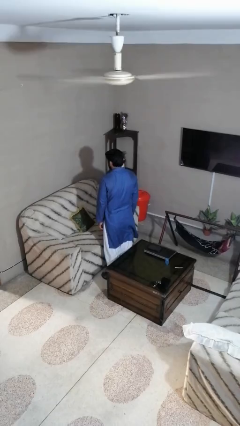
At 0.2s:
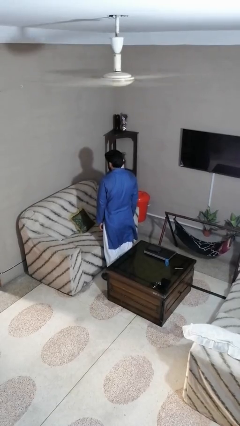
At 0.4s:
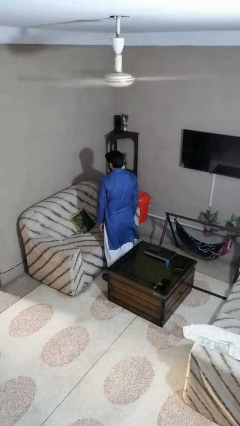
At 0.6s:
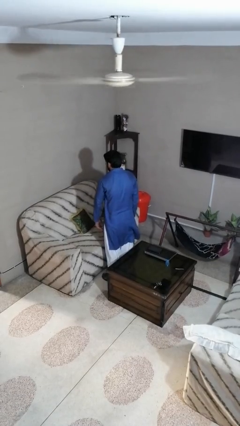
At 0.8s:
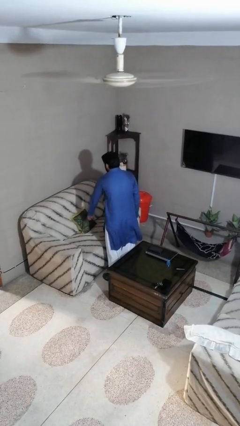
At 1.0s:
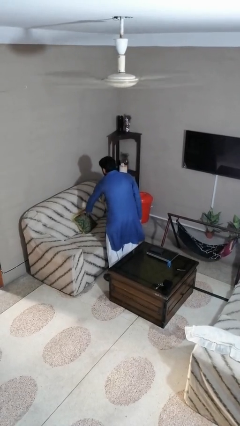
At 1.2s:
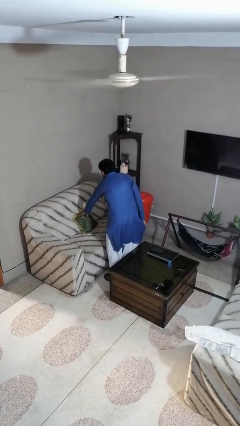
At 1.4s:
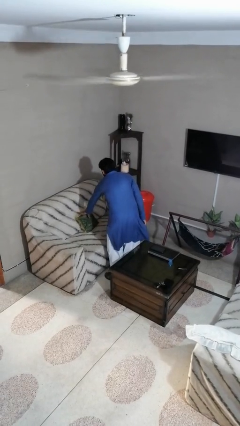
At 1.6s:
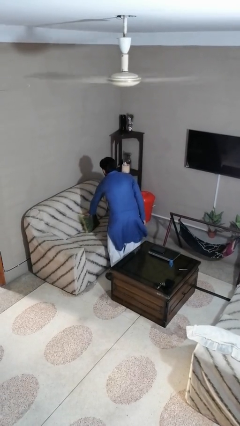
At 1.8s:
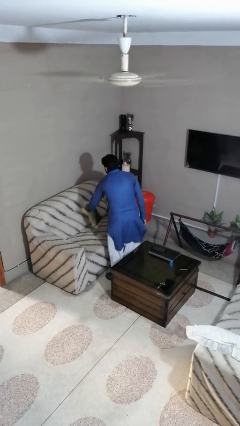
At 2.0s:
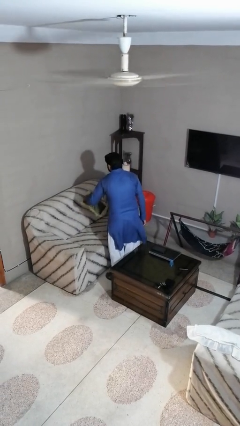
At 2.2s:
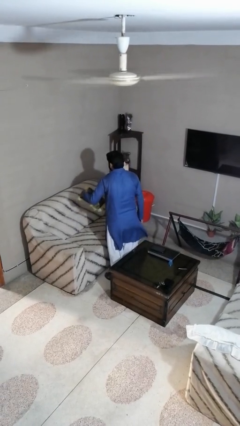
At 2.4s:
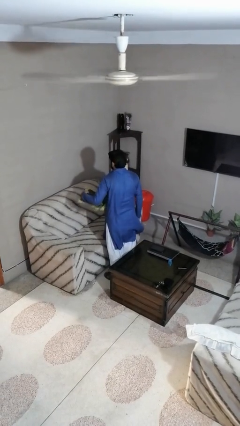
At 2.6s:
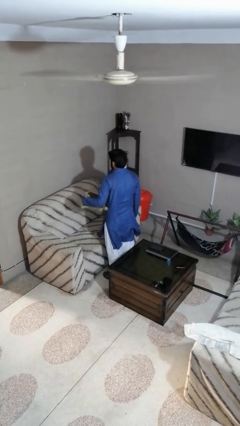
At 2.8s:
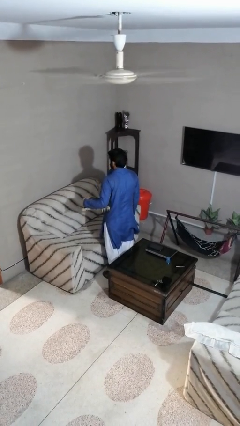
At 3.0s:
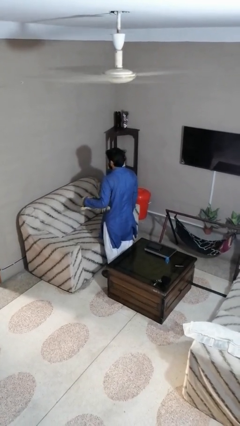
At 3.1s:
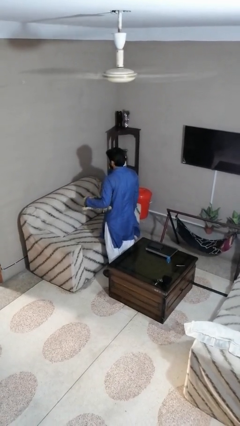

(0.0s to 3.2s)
person picks up object from couch

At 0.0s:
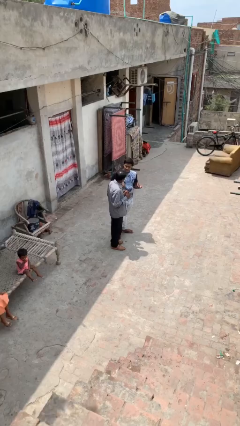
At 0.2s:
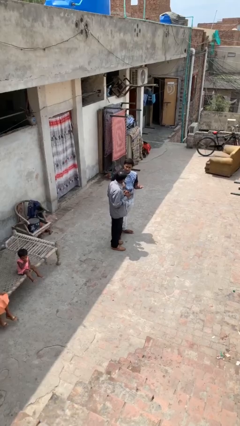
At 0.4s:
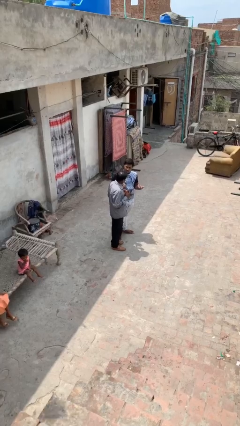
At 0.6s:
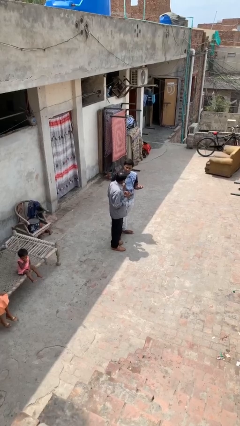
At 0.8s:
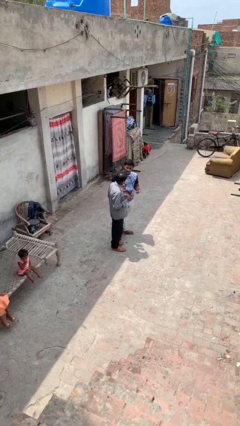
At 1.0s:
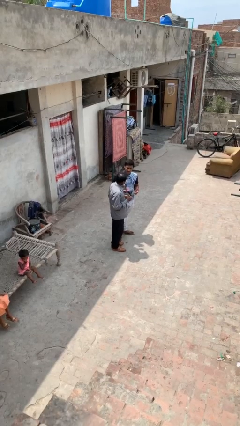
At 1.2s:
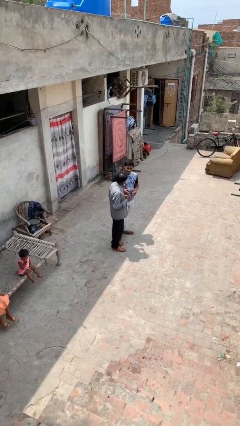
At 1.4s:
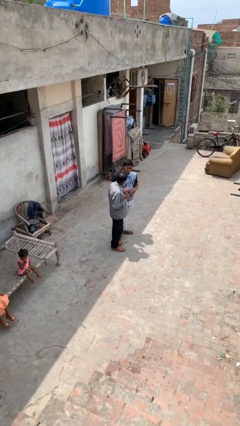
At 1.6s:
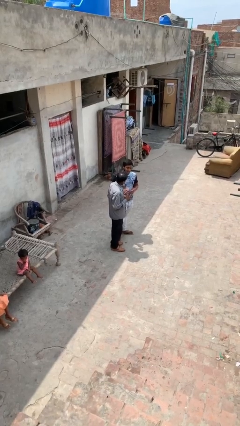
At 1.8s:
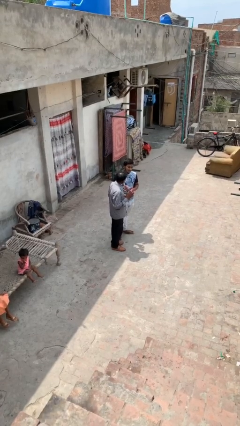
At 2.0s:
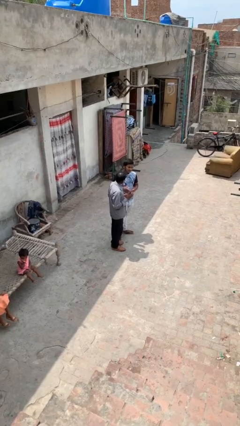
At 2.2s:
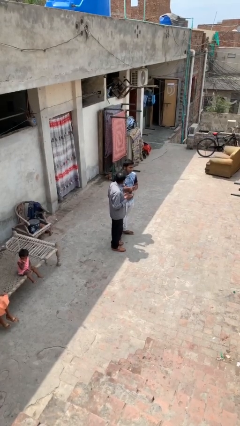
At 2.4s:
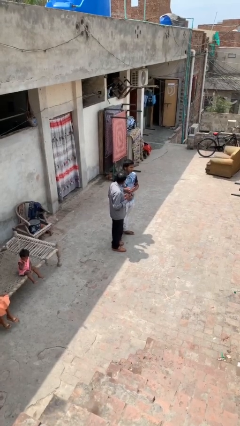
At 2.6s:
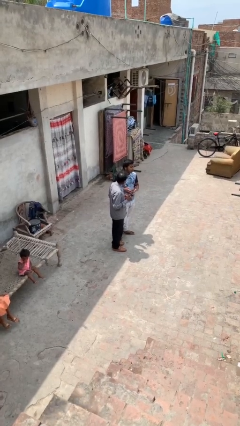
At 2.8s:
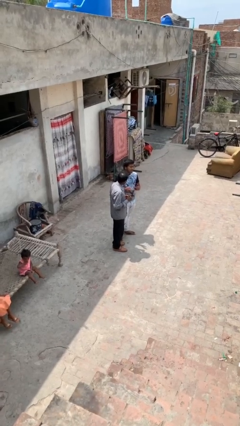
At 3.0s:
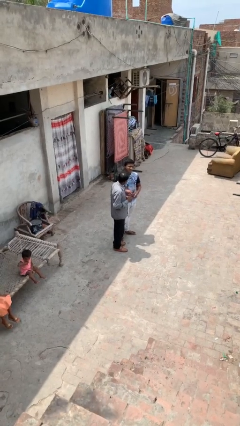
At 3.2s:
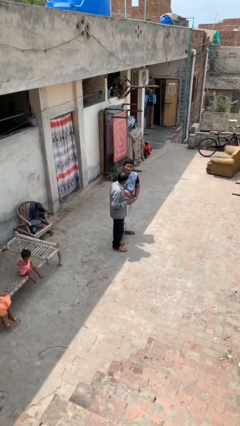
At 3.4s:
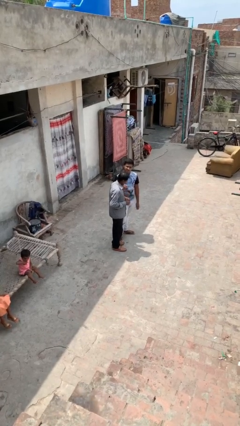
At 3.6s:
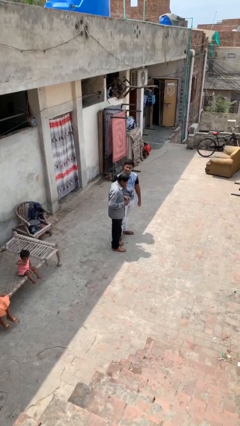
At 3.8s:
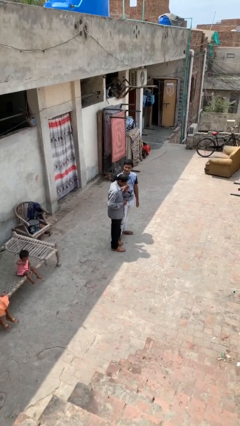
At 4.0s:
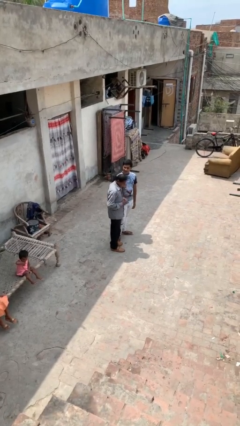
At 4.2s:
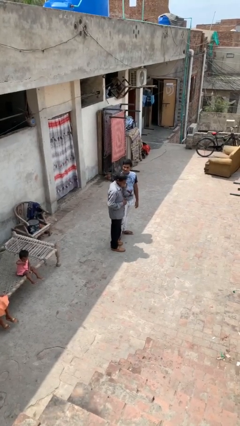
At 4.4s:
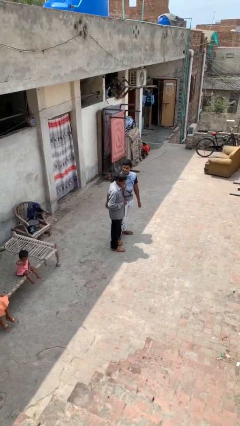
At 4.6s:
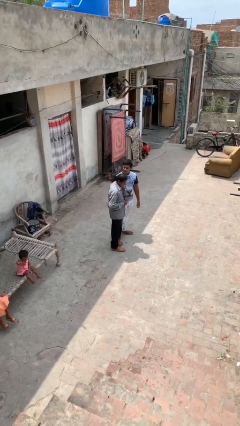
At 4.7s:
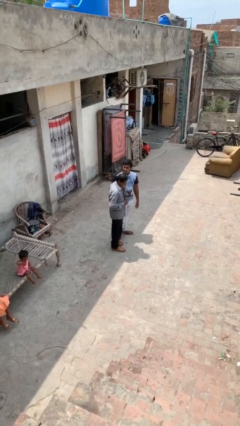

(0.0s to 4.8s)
person talks to person

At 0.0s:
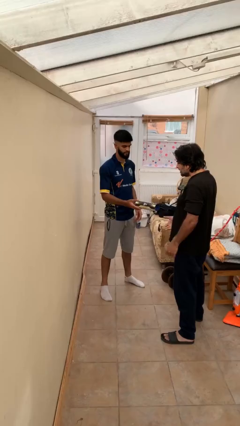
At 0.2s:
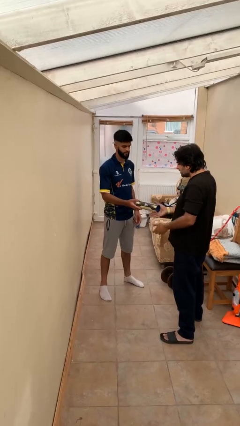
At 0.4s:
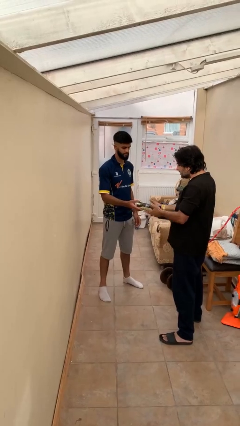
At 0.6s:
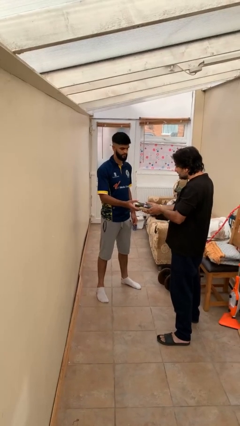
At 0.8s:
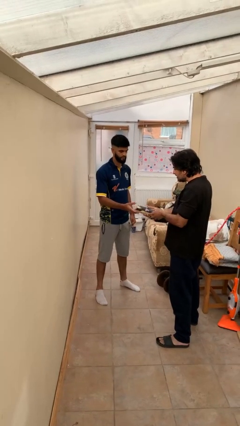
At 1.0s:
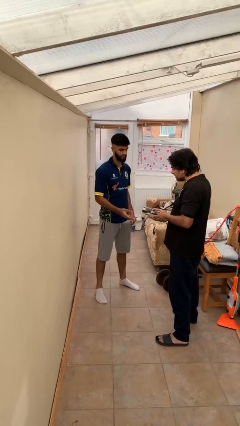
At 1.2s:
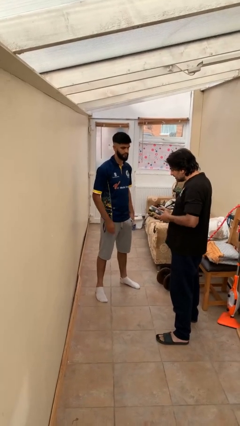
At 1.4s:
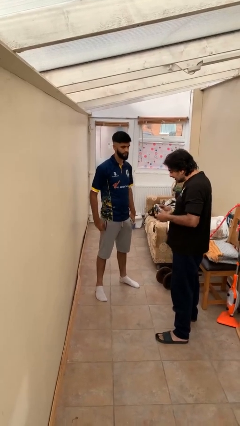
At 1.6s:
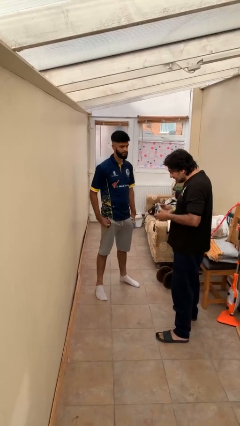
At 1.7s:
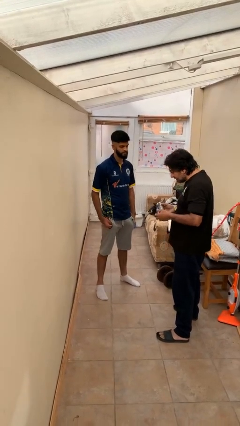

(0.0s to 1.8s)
person transfers object to person

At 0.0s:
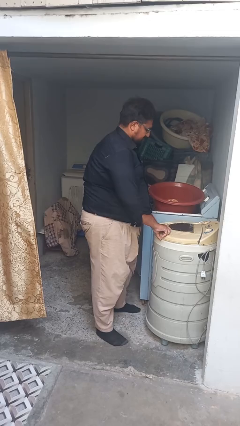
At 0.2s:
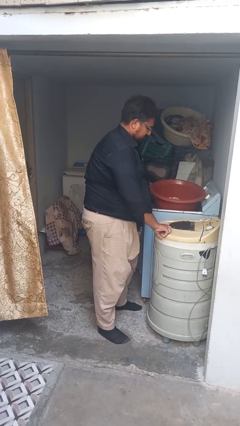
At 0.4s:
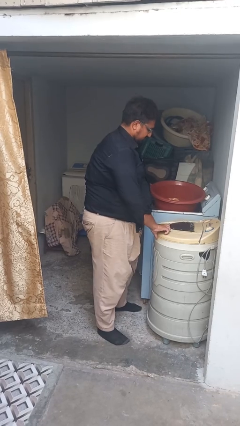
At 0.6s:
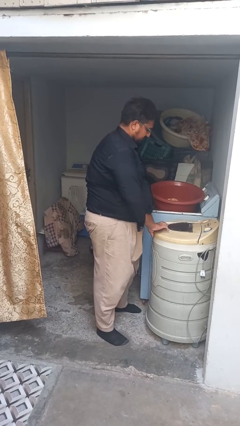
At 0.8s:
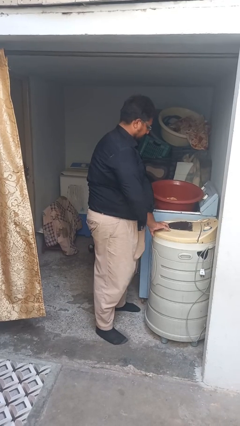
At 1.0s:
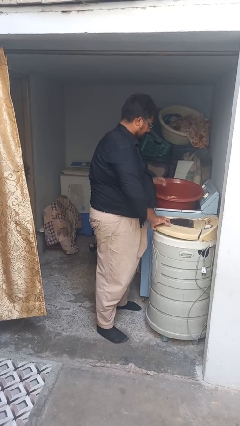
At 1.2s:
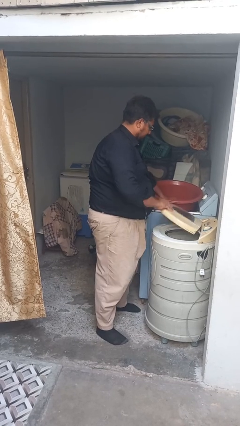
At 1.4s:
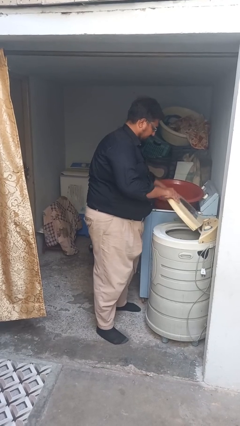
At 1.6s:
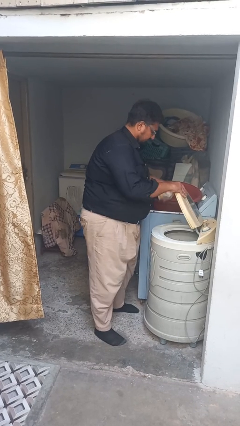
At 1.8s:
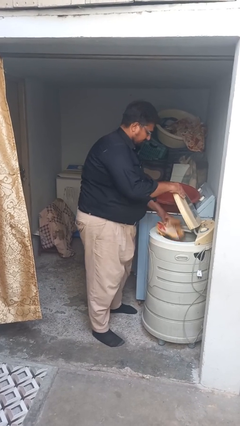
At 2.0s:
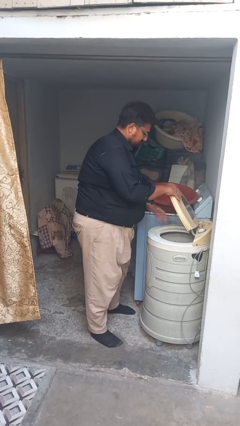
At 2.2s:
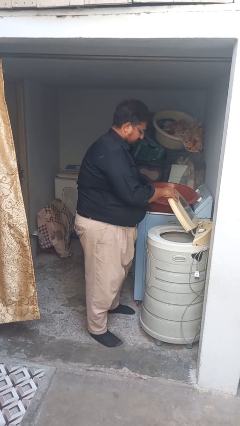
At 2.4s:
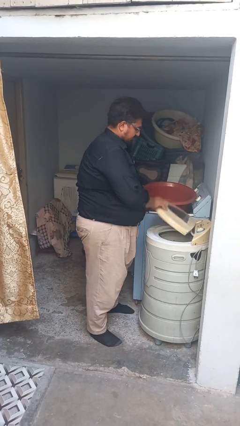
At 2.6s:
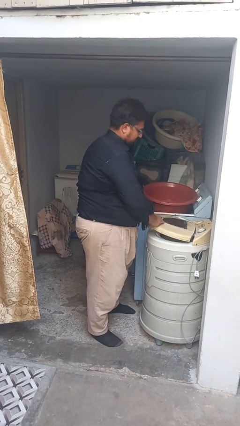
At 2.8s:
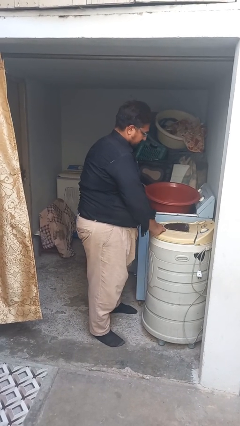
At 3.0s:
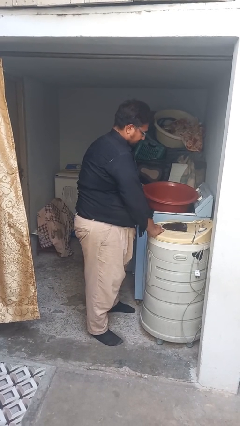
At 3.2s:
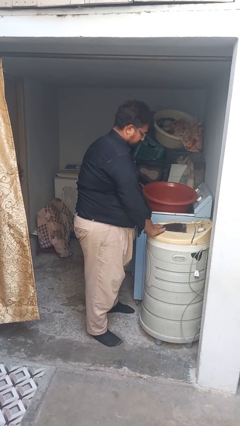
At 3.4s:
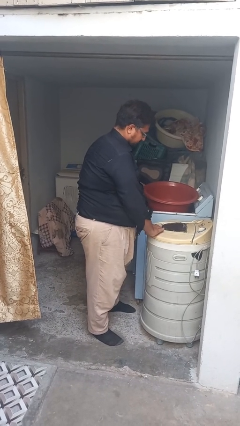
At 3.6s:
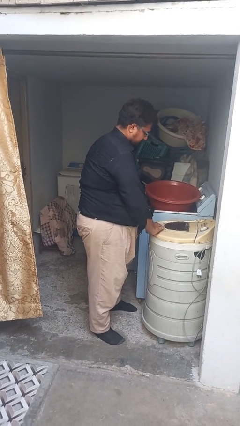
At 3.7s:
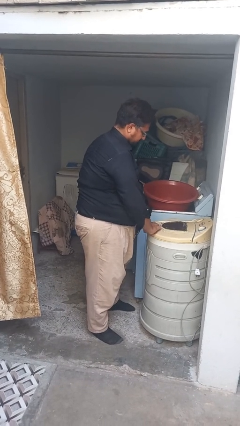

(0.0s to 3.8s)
person loads clotheswasher

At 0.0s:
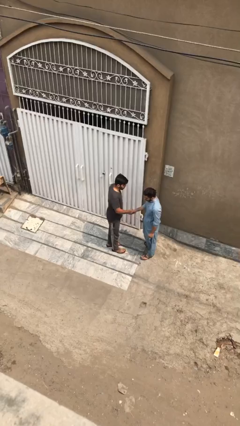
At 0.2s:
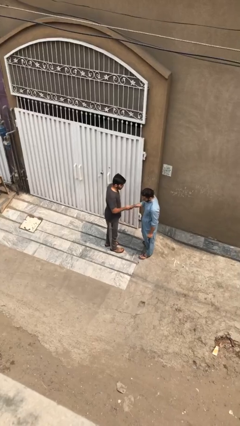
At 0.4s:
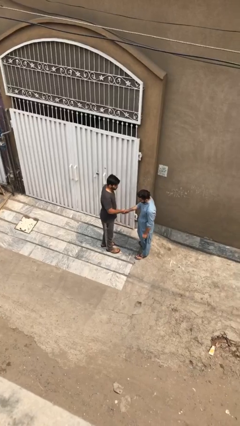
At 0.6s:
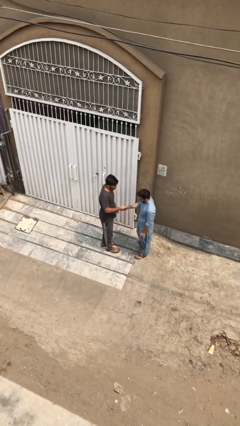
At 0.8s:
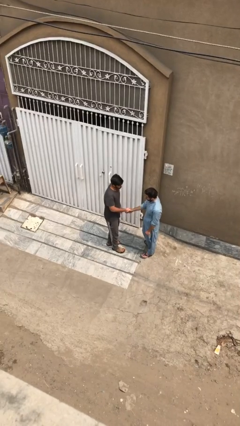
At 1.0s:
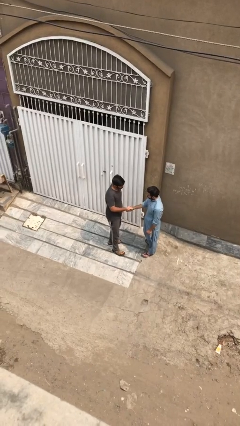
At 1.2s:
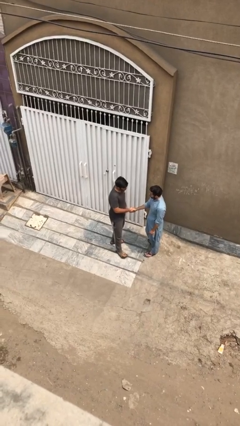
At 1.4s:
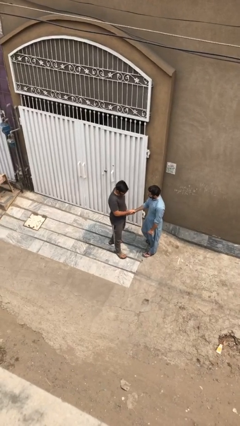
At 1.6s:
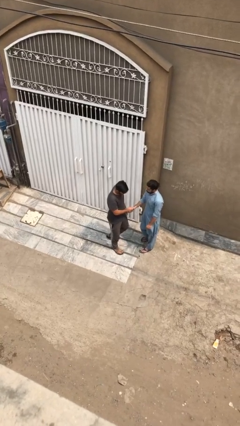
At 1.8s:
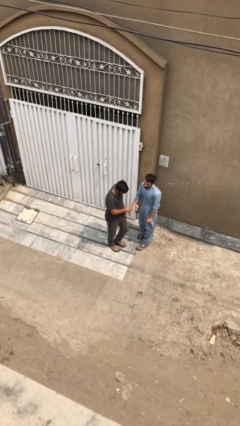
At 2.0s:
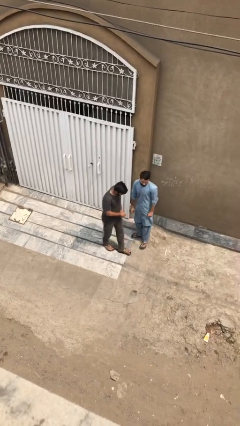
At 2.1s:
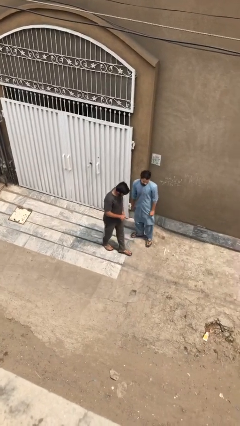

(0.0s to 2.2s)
person shakes hand

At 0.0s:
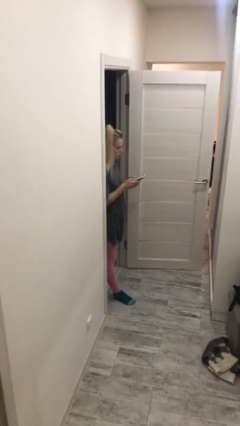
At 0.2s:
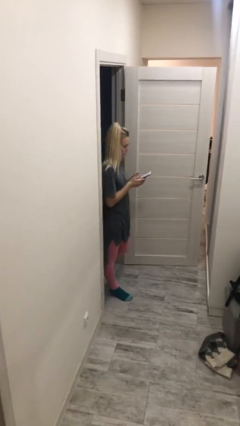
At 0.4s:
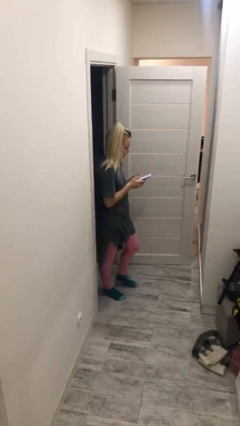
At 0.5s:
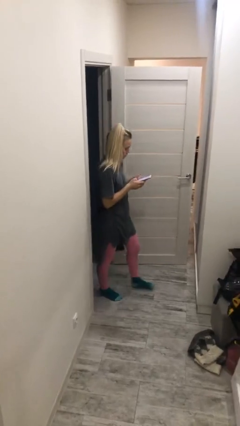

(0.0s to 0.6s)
person enters scene through structure

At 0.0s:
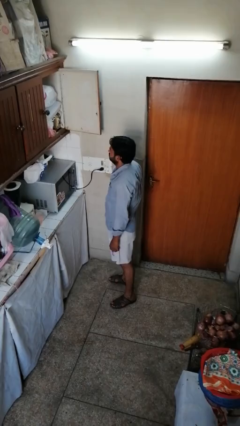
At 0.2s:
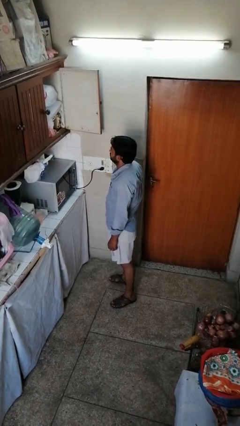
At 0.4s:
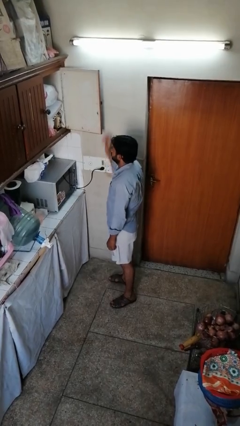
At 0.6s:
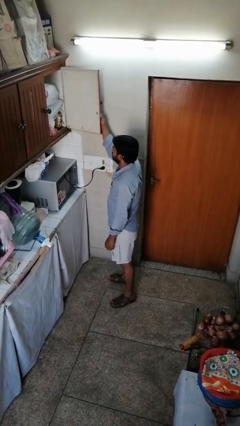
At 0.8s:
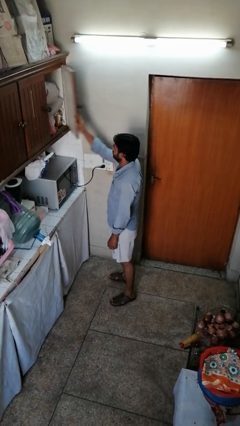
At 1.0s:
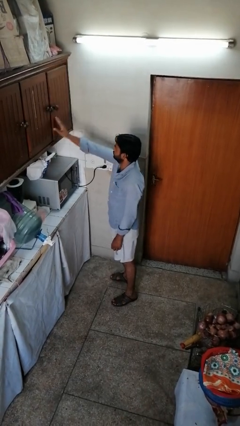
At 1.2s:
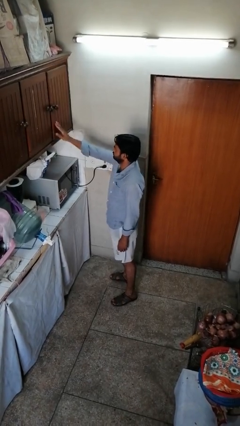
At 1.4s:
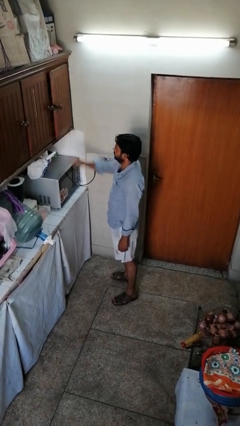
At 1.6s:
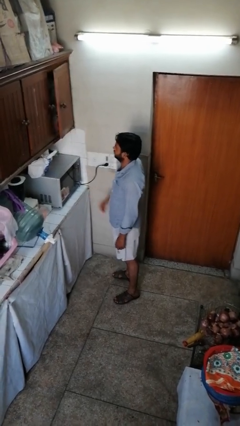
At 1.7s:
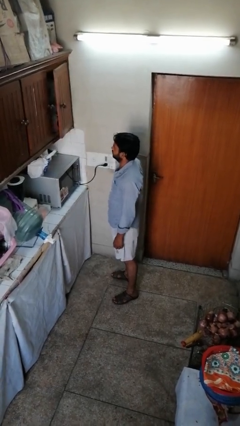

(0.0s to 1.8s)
person closes cabinet
